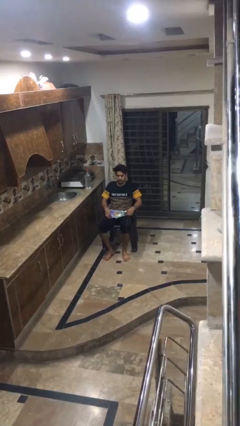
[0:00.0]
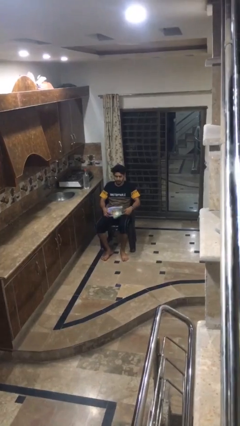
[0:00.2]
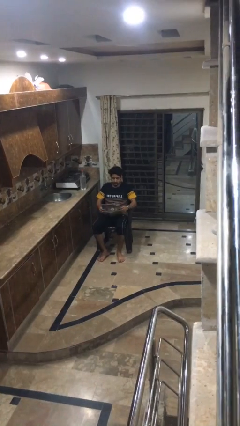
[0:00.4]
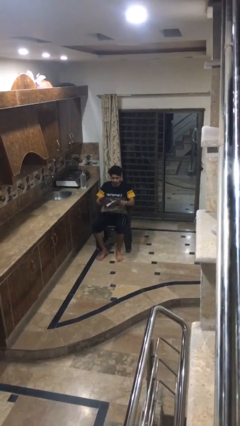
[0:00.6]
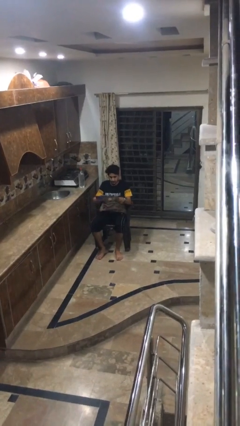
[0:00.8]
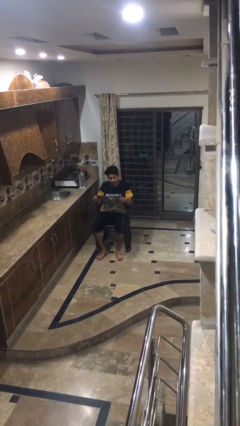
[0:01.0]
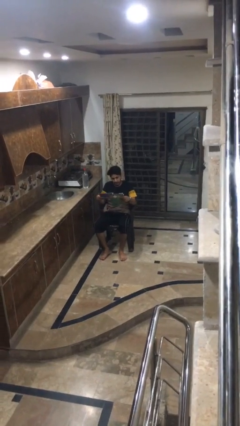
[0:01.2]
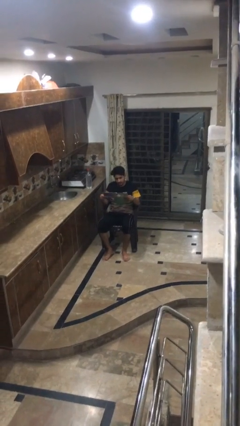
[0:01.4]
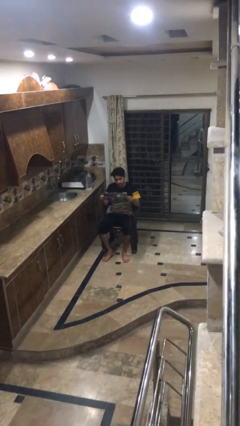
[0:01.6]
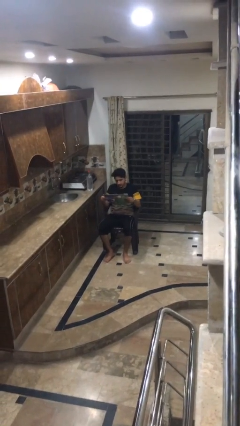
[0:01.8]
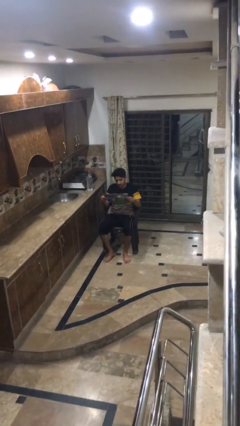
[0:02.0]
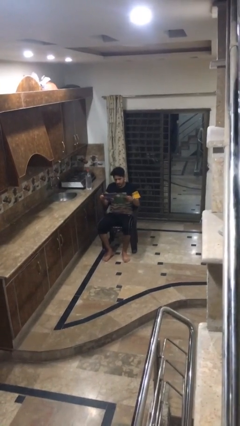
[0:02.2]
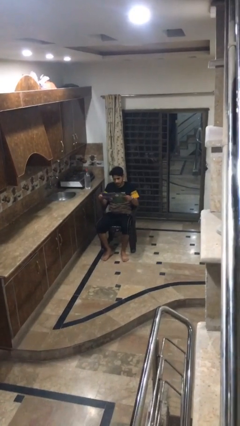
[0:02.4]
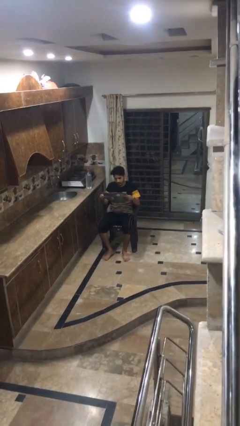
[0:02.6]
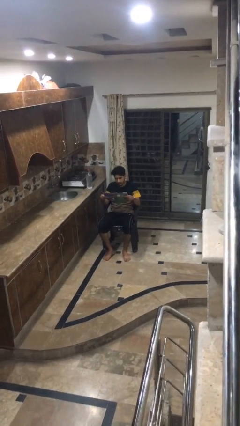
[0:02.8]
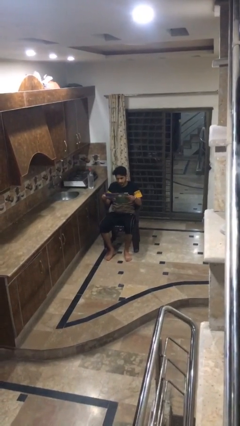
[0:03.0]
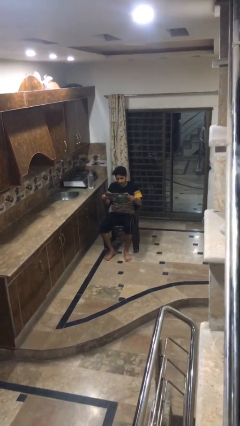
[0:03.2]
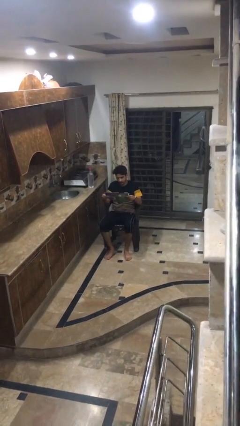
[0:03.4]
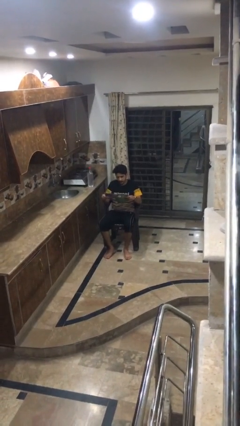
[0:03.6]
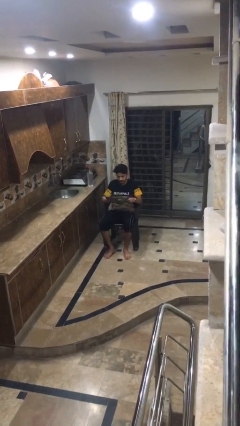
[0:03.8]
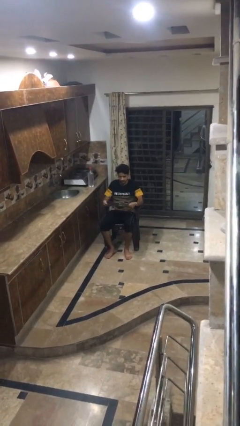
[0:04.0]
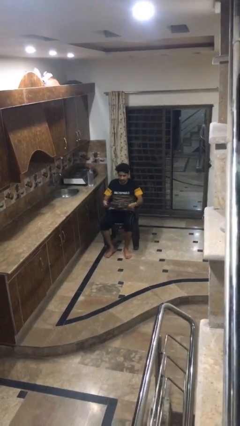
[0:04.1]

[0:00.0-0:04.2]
person reads newspaper

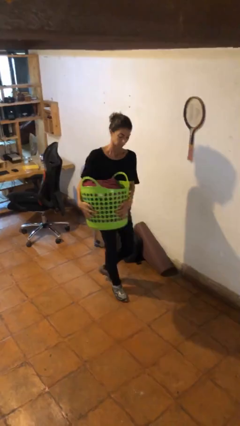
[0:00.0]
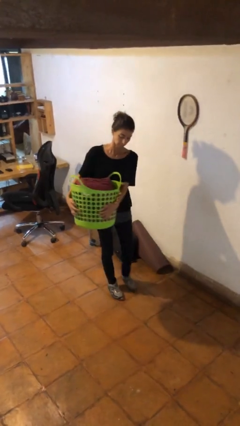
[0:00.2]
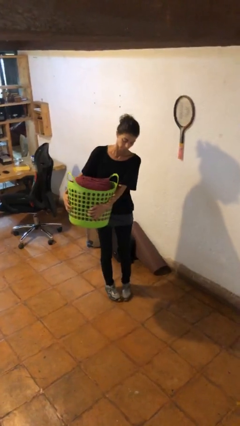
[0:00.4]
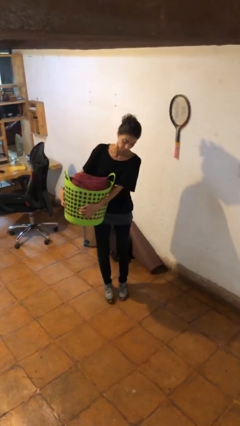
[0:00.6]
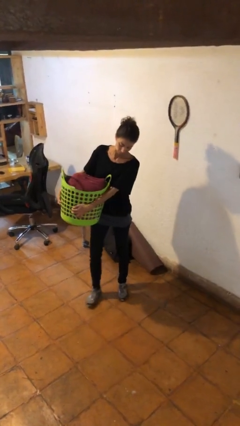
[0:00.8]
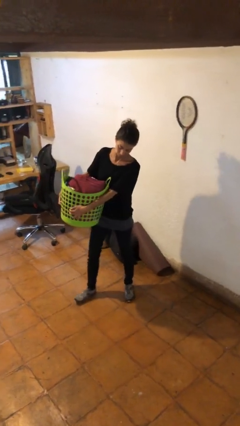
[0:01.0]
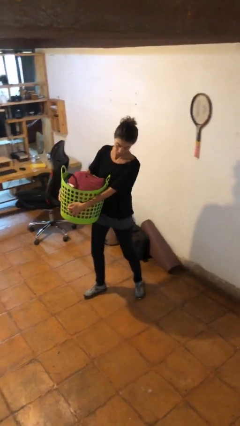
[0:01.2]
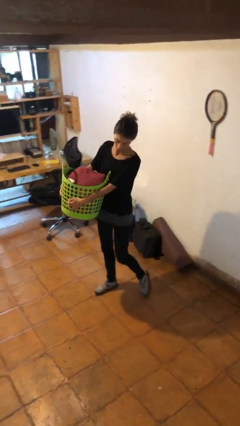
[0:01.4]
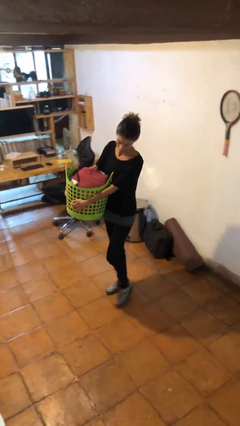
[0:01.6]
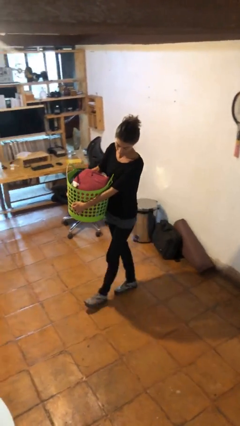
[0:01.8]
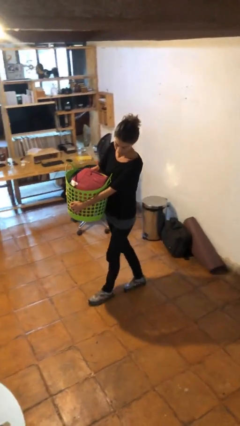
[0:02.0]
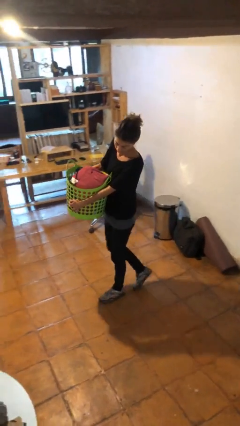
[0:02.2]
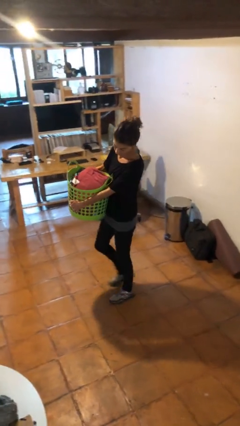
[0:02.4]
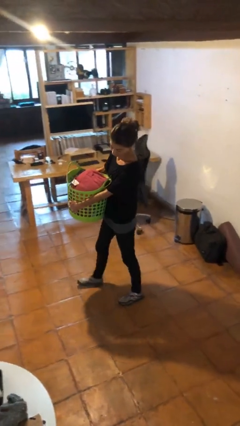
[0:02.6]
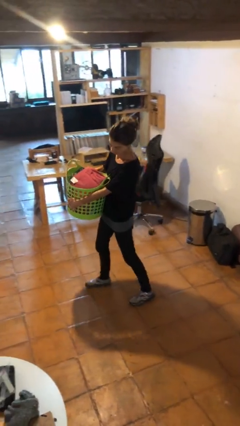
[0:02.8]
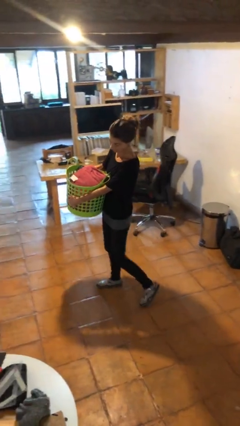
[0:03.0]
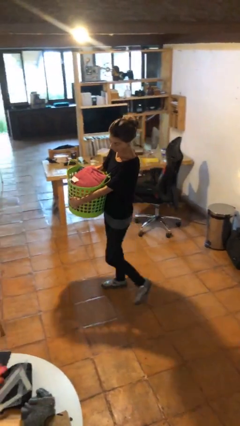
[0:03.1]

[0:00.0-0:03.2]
person carries laundry basket

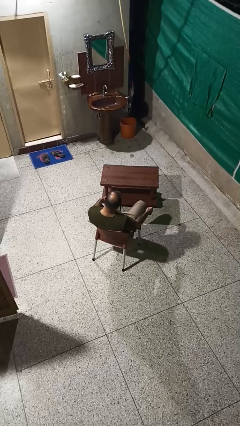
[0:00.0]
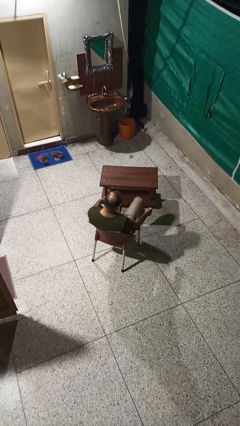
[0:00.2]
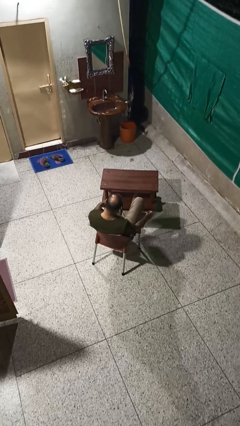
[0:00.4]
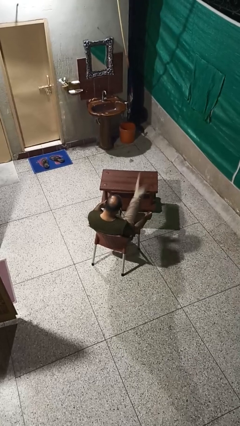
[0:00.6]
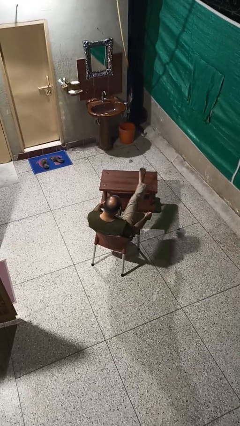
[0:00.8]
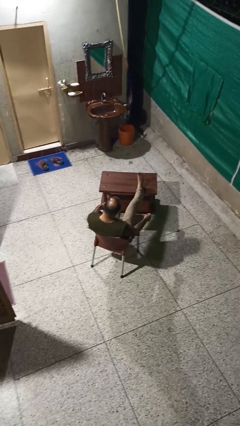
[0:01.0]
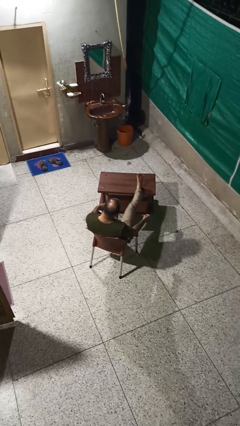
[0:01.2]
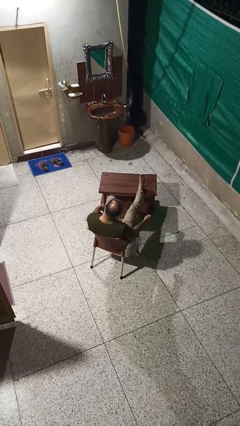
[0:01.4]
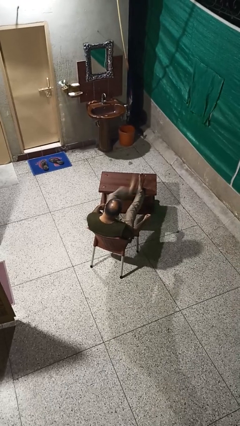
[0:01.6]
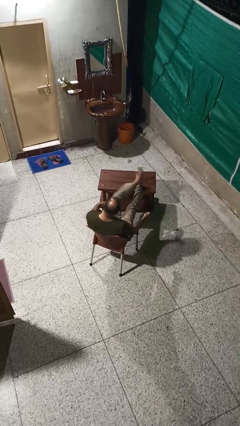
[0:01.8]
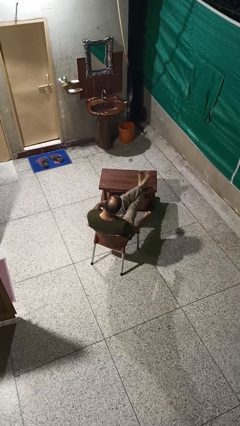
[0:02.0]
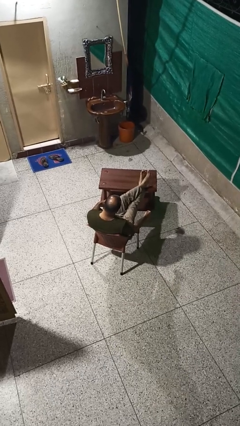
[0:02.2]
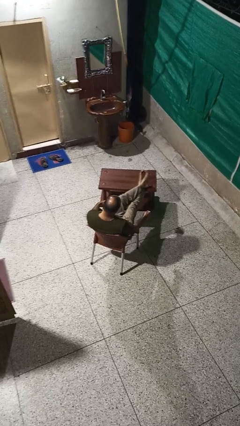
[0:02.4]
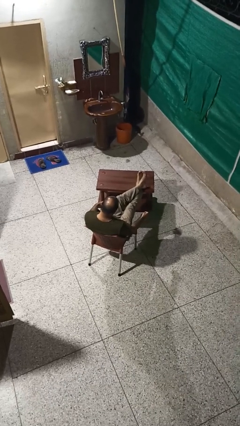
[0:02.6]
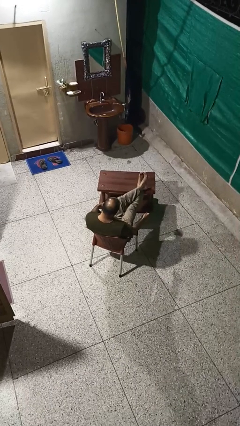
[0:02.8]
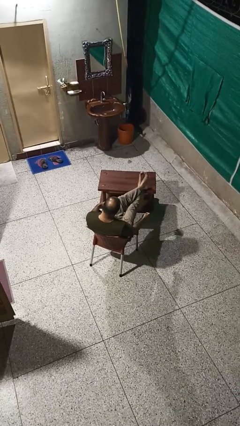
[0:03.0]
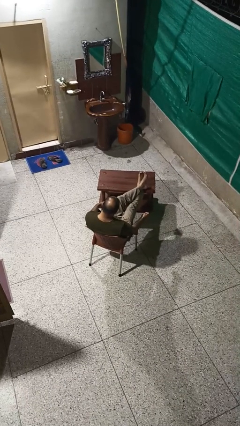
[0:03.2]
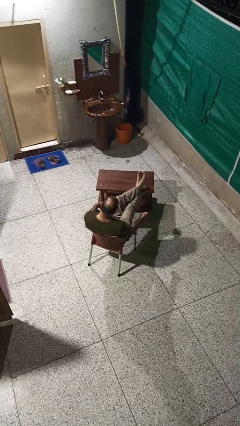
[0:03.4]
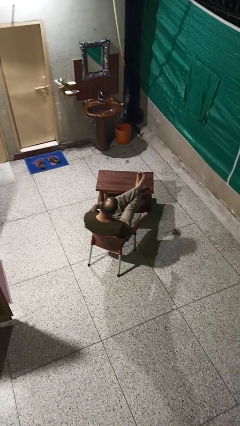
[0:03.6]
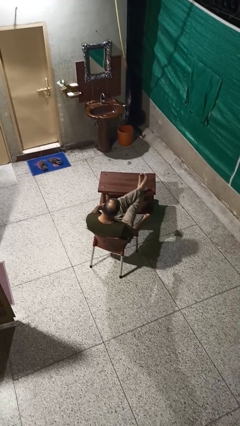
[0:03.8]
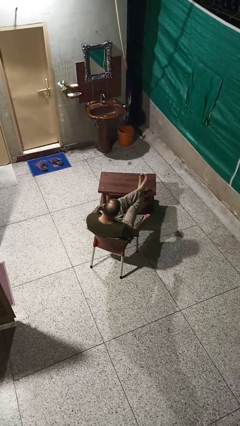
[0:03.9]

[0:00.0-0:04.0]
person puts feet up

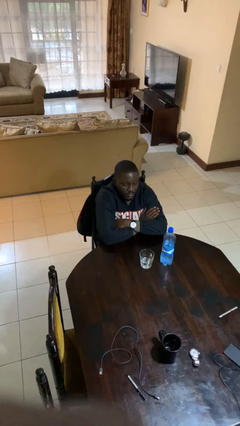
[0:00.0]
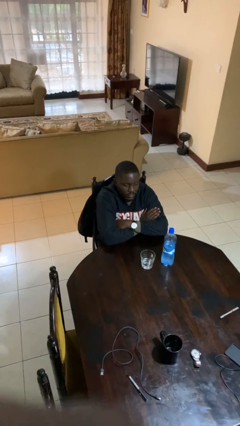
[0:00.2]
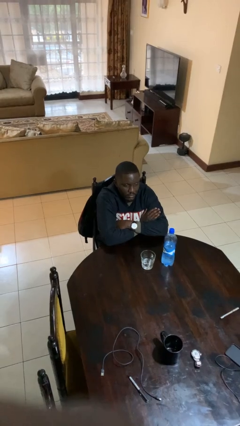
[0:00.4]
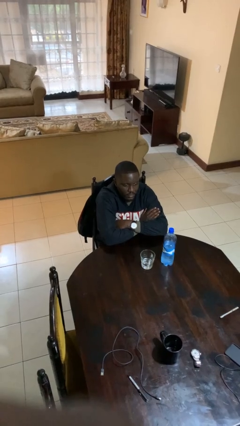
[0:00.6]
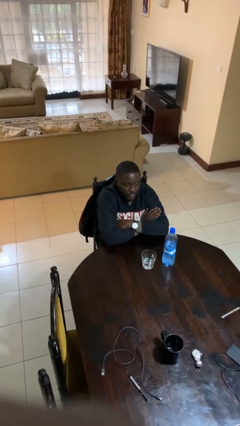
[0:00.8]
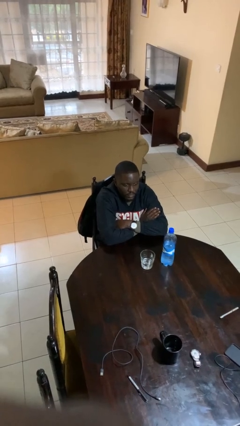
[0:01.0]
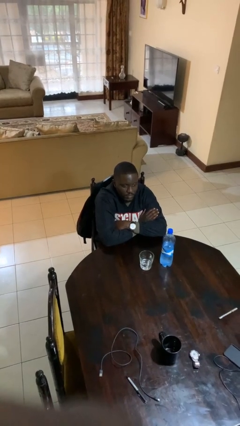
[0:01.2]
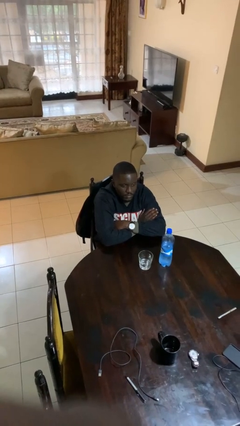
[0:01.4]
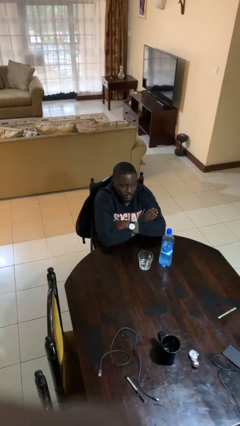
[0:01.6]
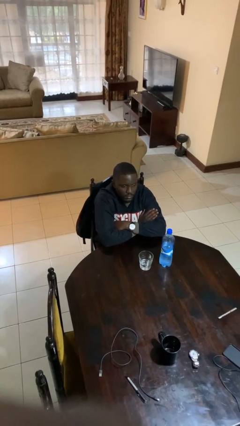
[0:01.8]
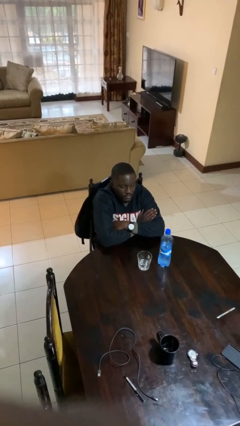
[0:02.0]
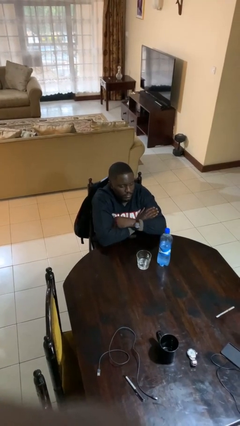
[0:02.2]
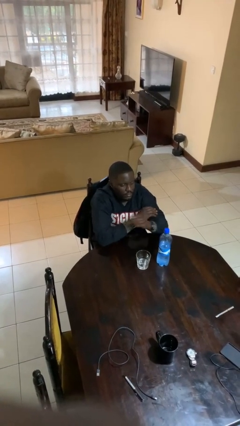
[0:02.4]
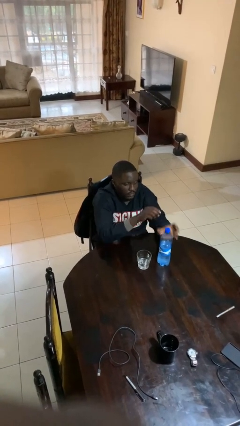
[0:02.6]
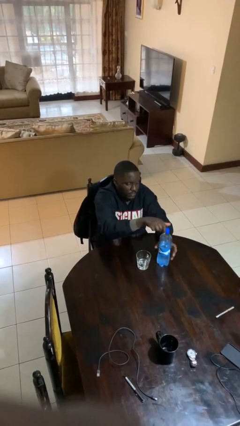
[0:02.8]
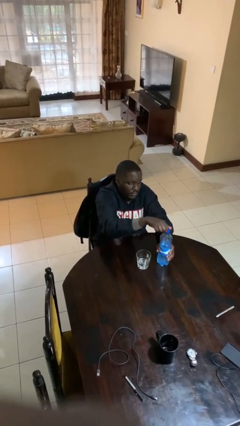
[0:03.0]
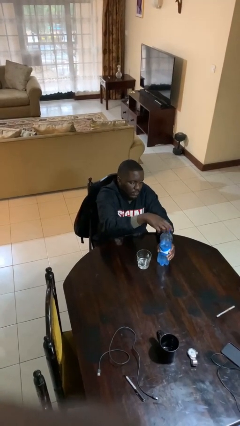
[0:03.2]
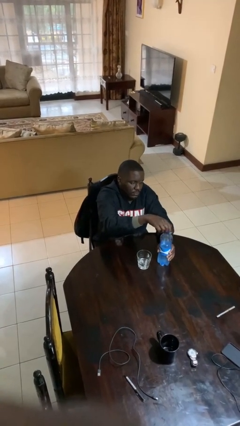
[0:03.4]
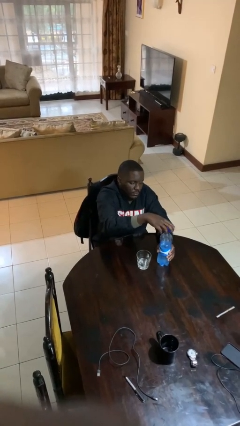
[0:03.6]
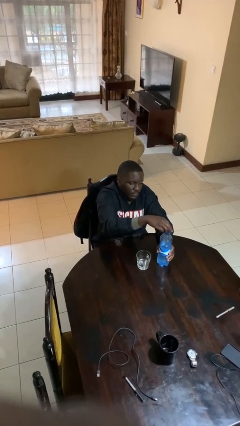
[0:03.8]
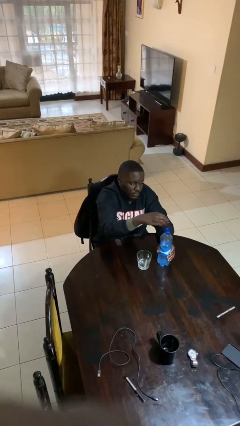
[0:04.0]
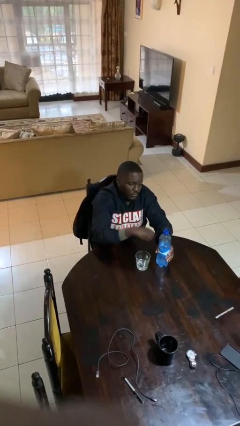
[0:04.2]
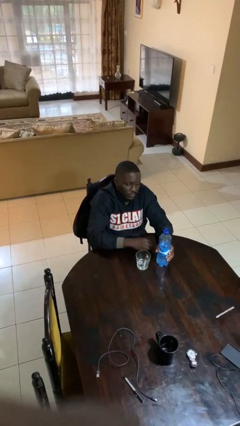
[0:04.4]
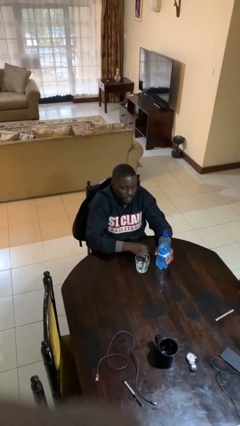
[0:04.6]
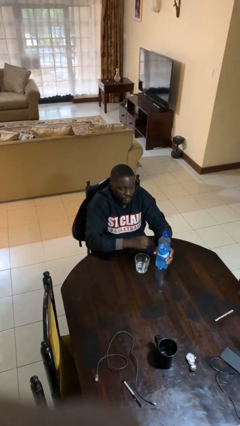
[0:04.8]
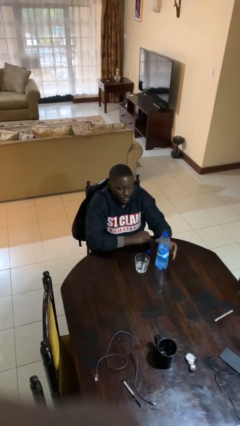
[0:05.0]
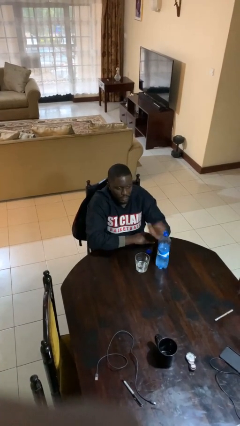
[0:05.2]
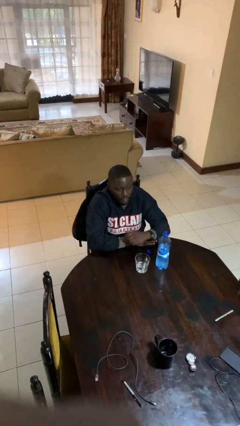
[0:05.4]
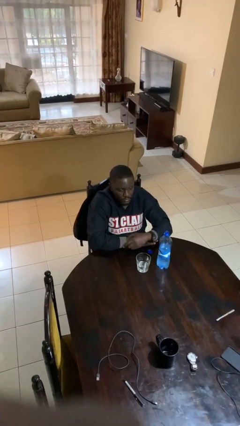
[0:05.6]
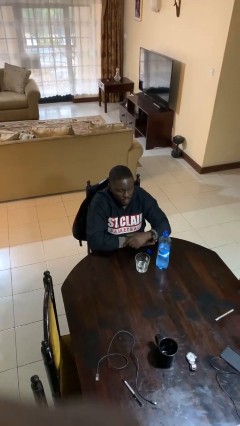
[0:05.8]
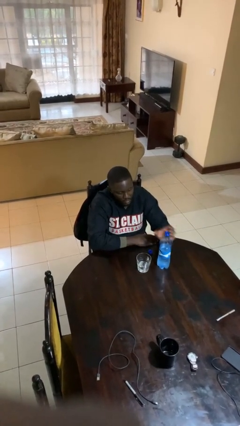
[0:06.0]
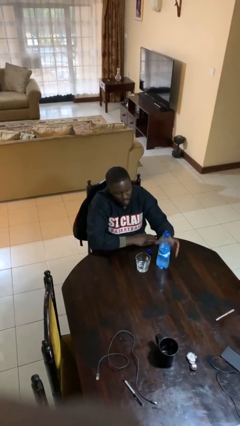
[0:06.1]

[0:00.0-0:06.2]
person unscrews lid from bottle

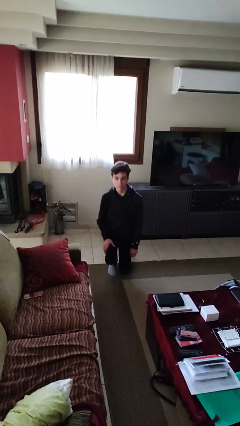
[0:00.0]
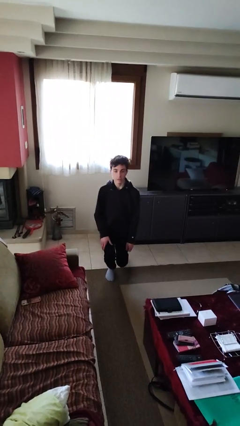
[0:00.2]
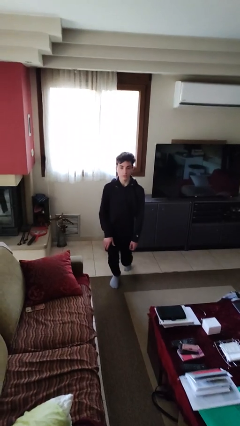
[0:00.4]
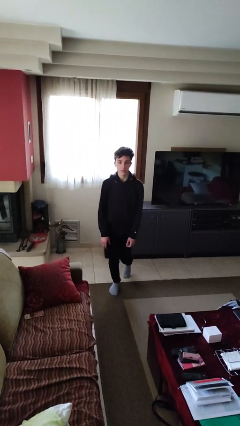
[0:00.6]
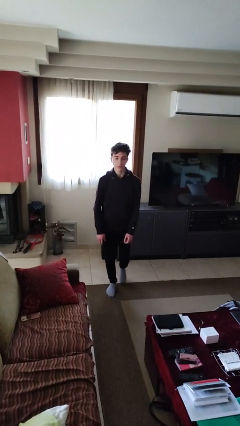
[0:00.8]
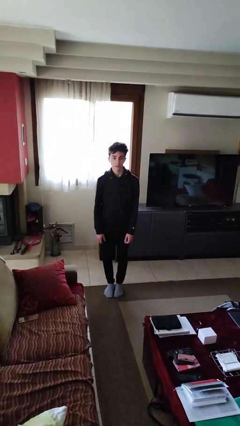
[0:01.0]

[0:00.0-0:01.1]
person stands up from floor
